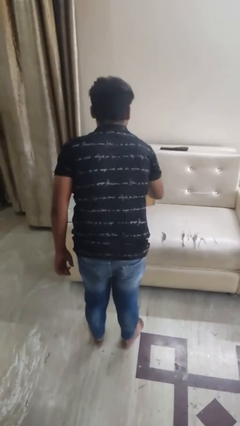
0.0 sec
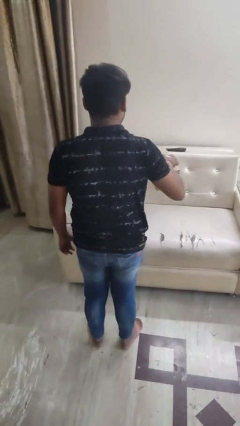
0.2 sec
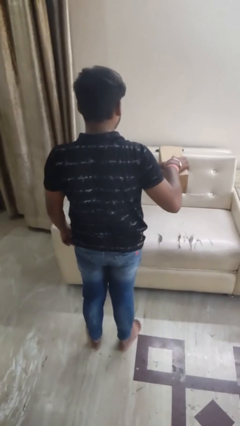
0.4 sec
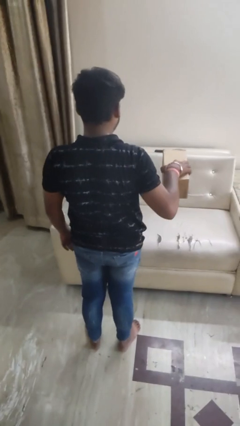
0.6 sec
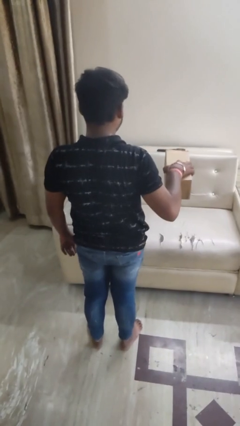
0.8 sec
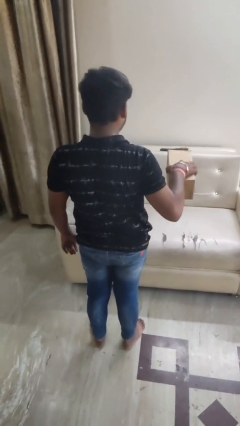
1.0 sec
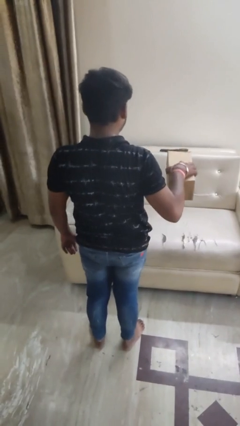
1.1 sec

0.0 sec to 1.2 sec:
person picks up object from bed

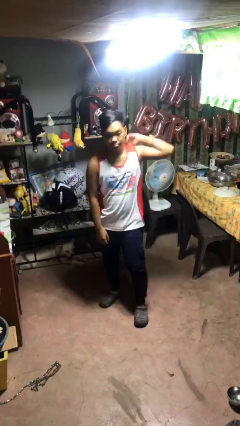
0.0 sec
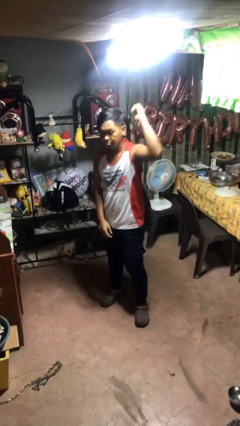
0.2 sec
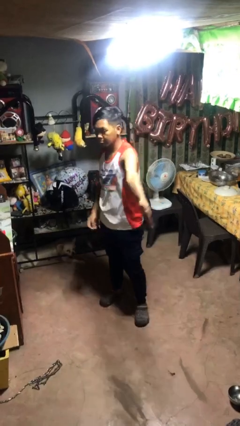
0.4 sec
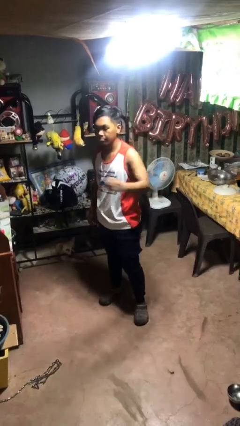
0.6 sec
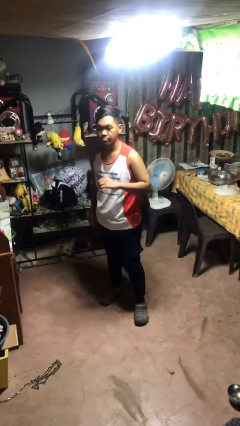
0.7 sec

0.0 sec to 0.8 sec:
person karate chop

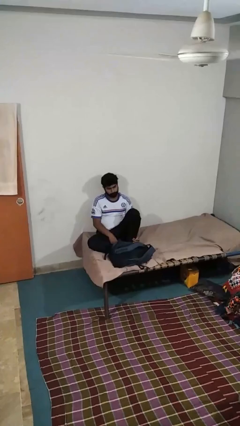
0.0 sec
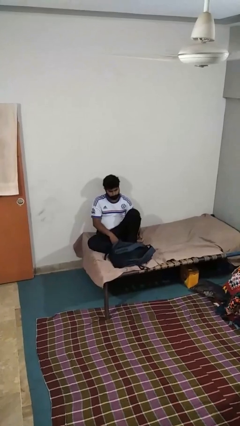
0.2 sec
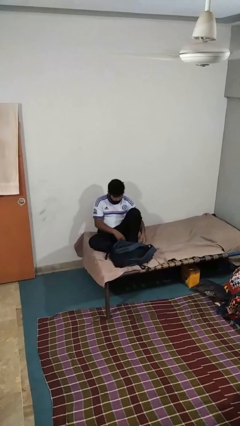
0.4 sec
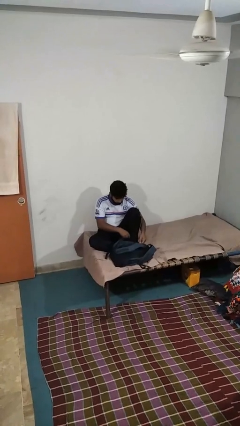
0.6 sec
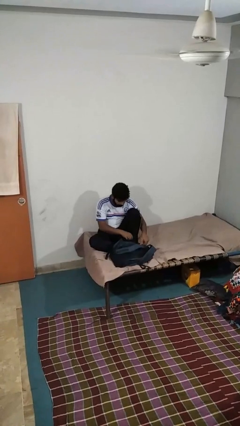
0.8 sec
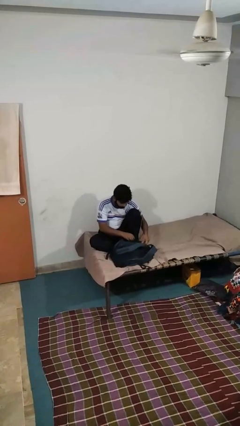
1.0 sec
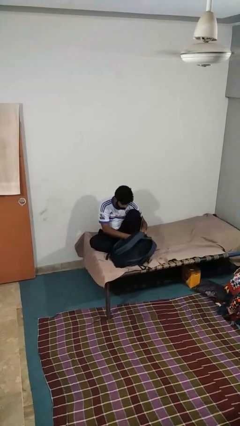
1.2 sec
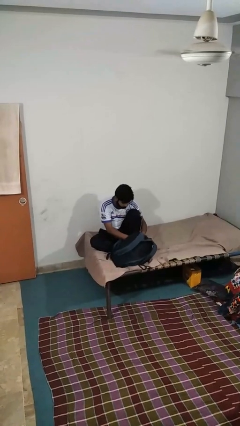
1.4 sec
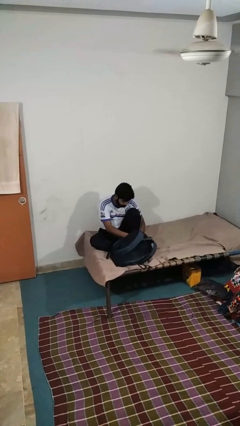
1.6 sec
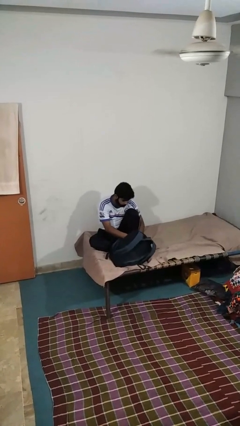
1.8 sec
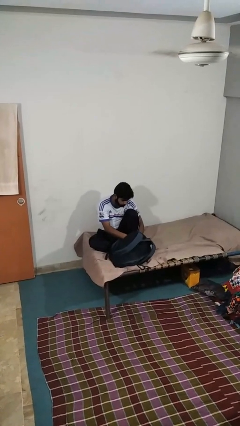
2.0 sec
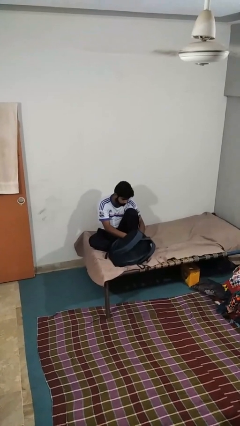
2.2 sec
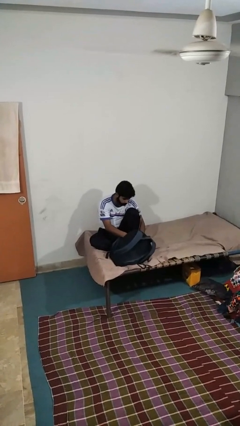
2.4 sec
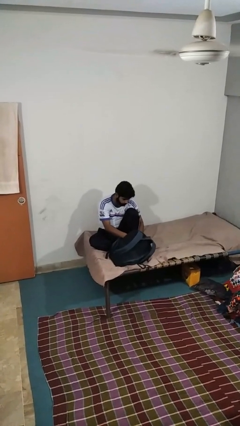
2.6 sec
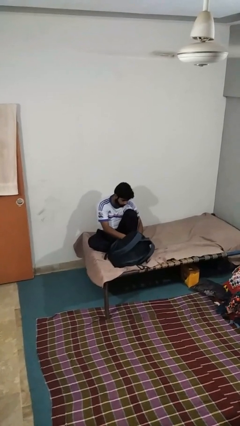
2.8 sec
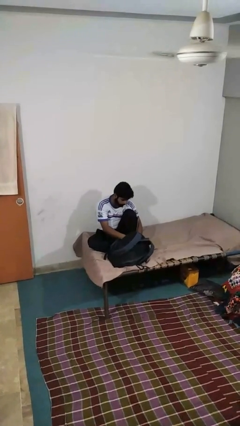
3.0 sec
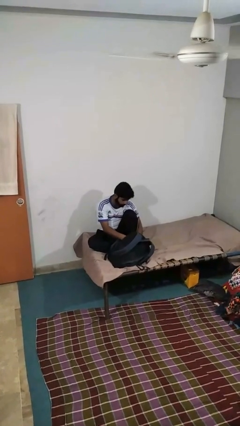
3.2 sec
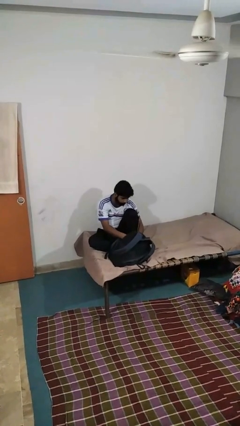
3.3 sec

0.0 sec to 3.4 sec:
person searches in backpack

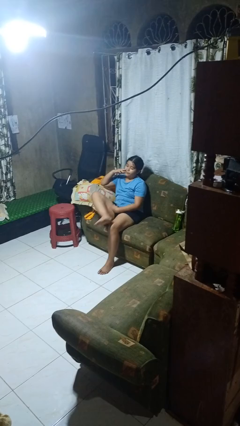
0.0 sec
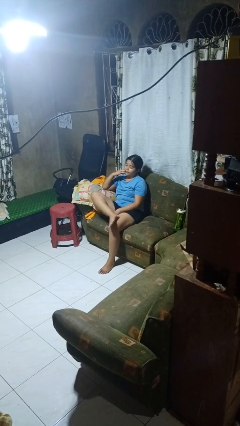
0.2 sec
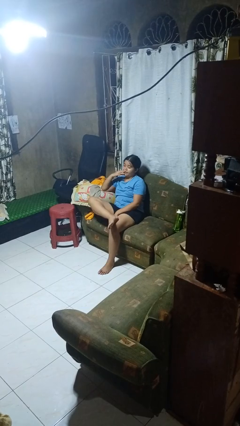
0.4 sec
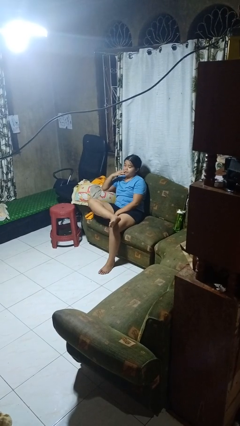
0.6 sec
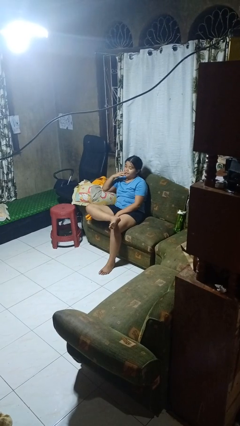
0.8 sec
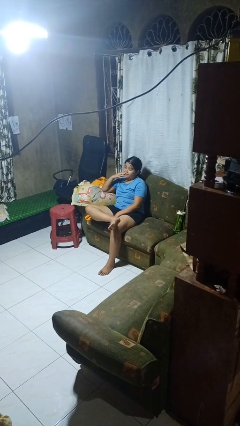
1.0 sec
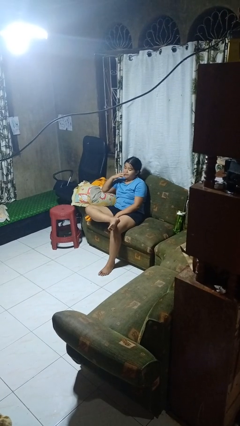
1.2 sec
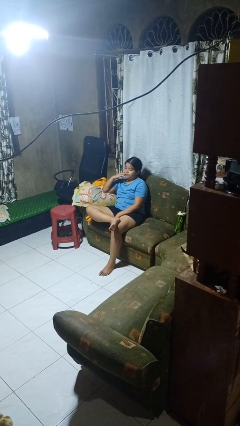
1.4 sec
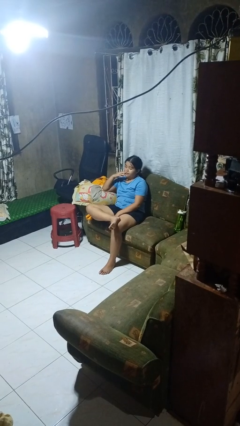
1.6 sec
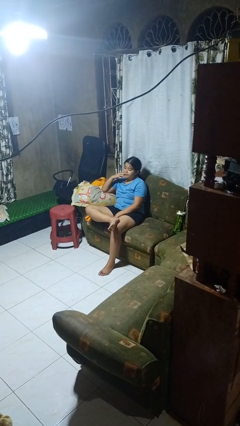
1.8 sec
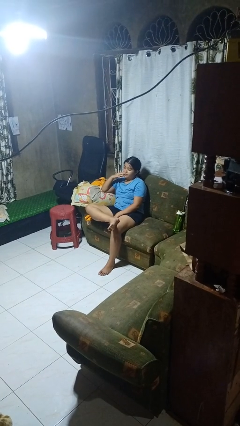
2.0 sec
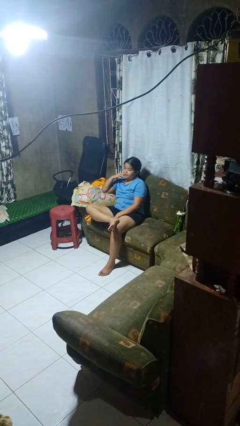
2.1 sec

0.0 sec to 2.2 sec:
person crosses legs

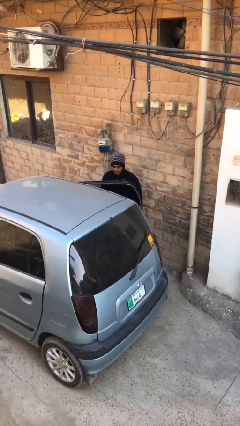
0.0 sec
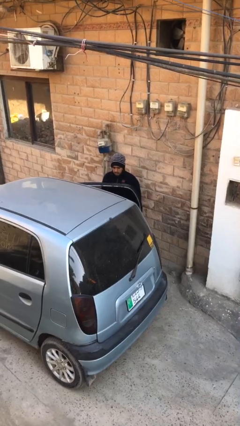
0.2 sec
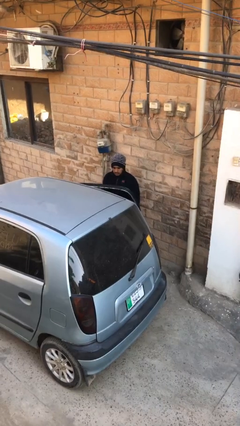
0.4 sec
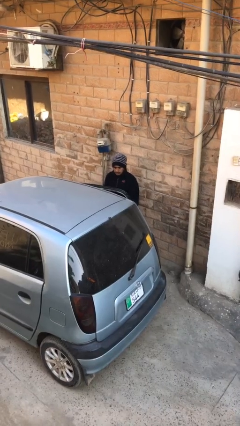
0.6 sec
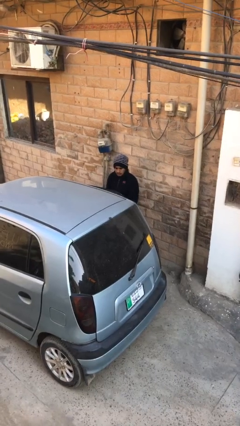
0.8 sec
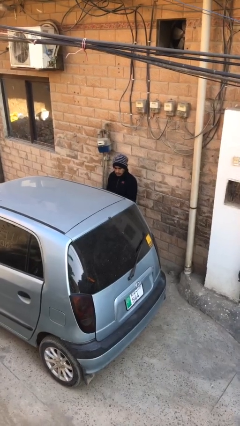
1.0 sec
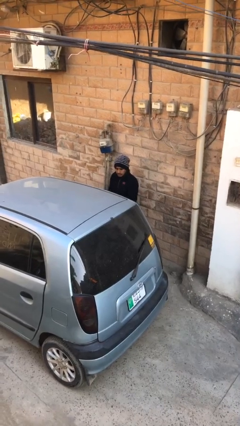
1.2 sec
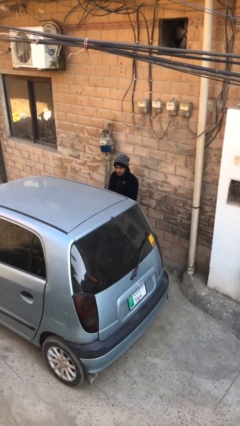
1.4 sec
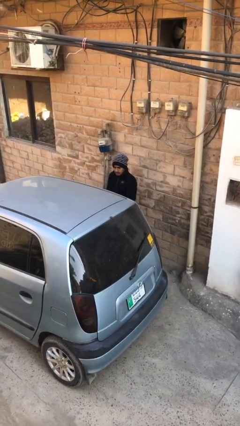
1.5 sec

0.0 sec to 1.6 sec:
person closes car door

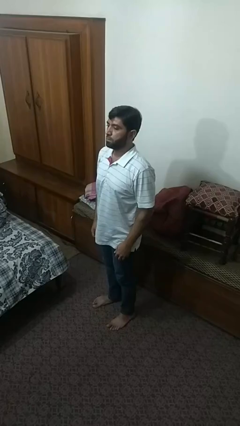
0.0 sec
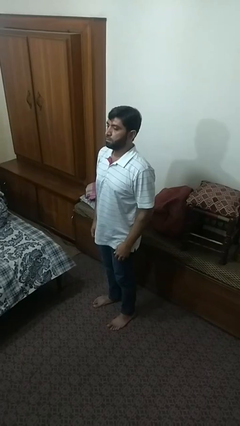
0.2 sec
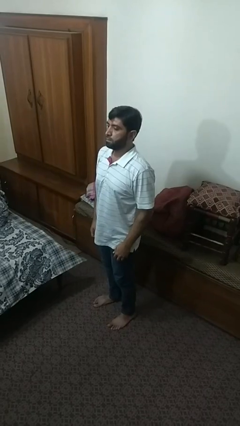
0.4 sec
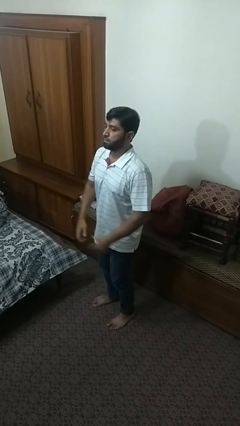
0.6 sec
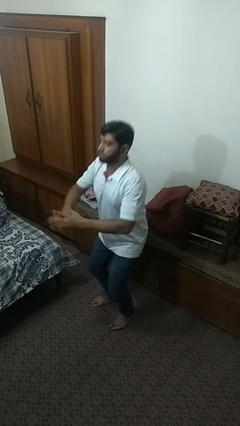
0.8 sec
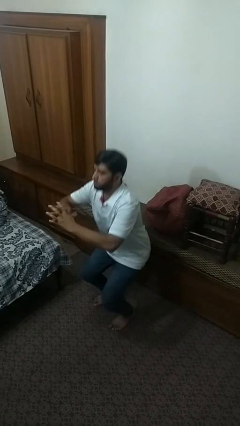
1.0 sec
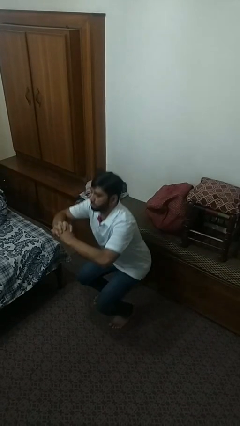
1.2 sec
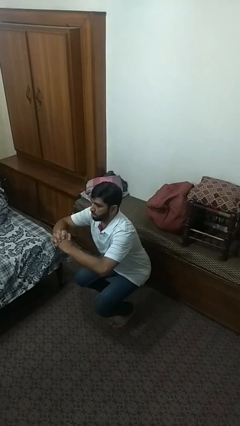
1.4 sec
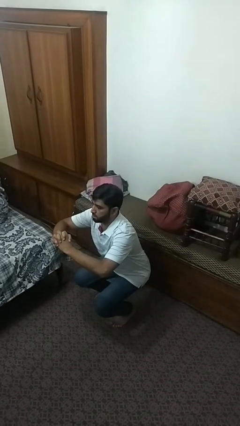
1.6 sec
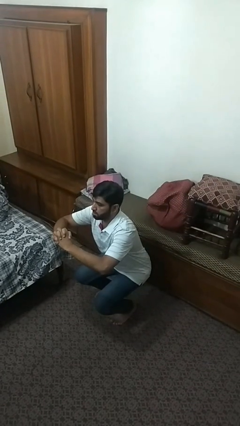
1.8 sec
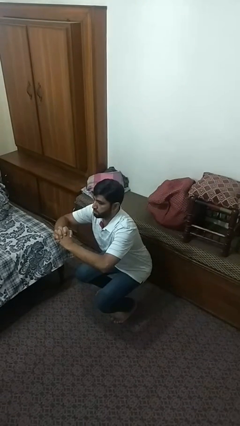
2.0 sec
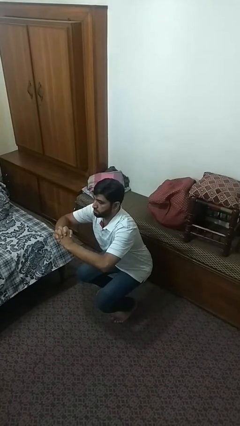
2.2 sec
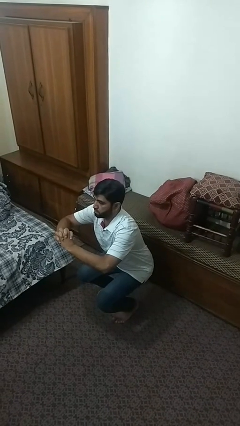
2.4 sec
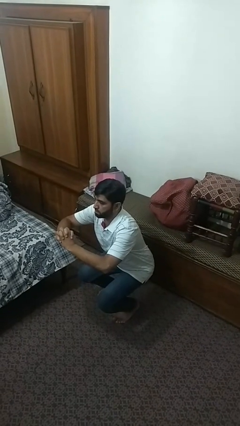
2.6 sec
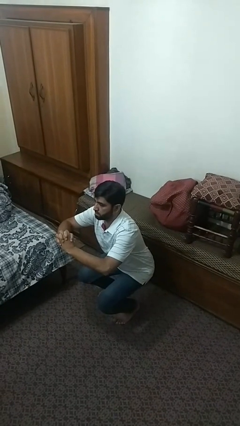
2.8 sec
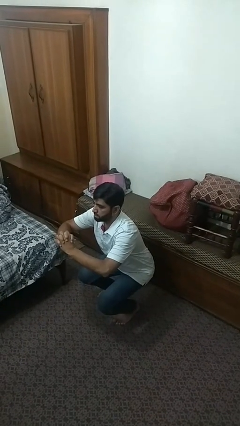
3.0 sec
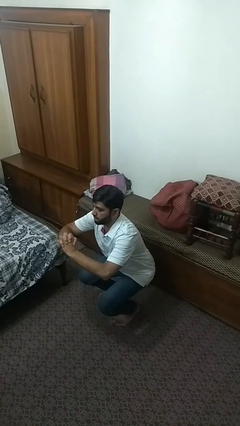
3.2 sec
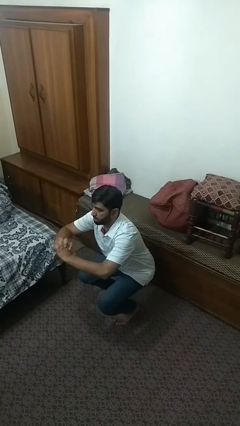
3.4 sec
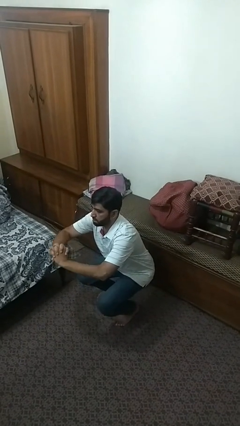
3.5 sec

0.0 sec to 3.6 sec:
person squats

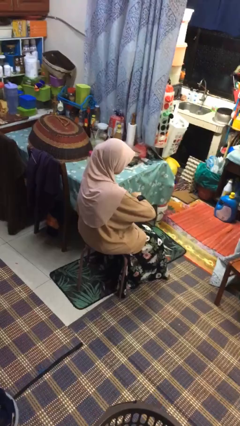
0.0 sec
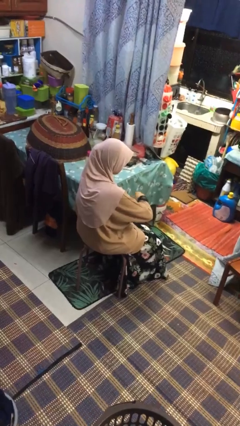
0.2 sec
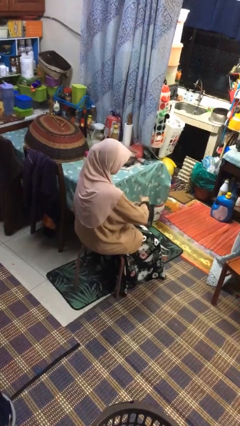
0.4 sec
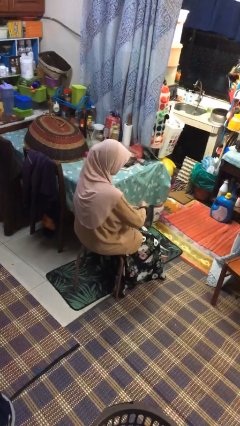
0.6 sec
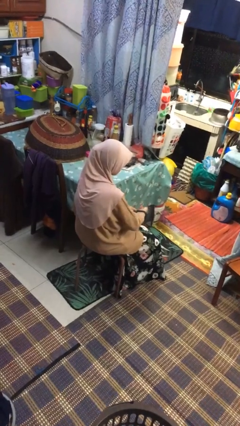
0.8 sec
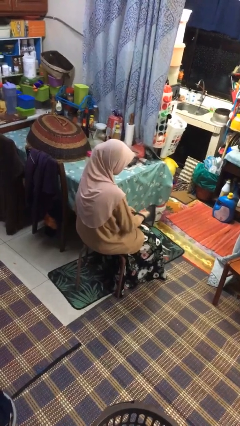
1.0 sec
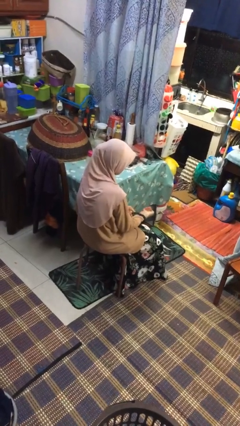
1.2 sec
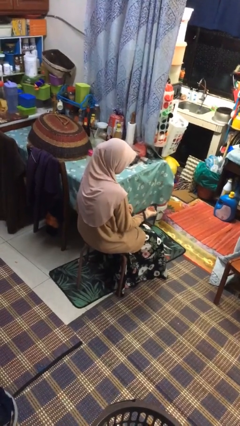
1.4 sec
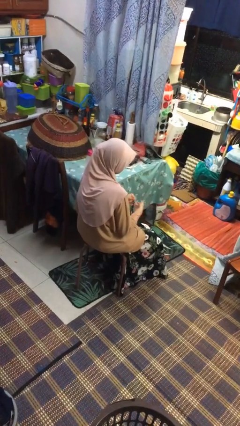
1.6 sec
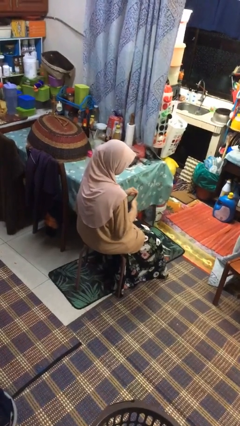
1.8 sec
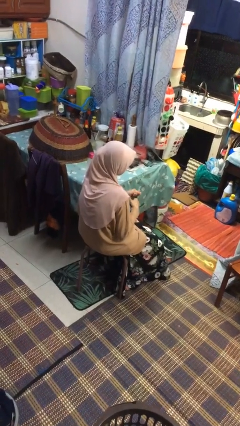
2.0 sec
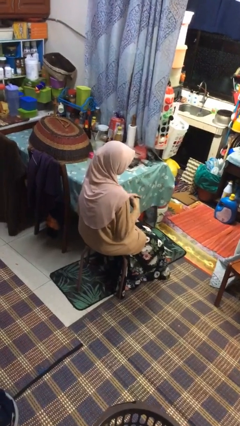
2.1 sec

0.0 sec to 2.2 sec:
person takes off wristwatch

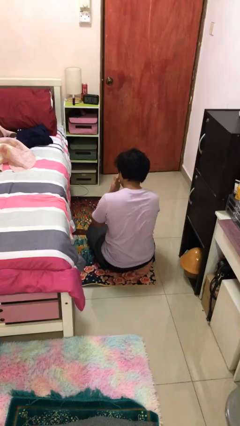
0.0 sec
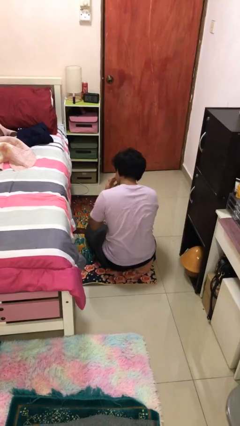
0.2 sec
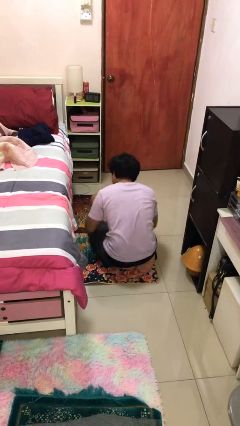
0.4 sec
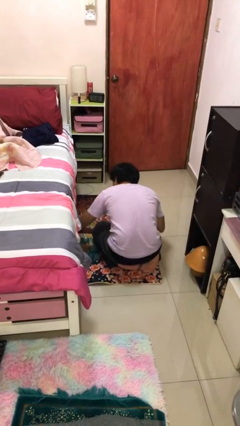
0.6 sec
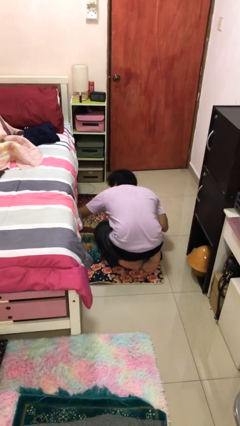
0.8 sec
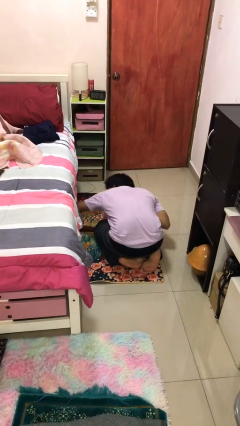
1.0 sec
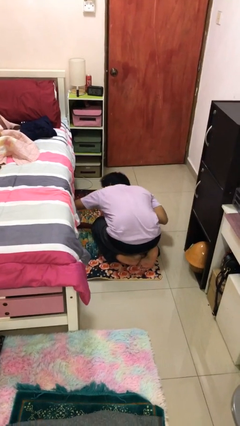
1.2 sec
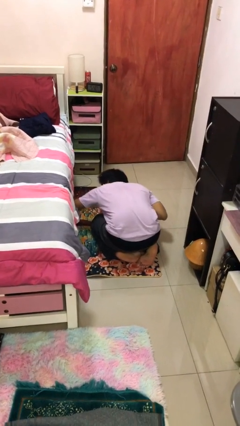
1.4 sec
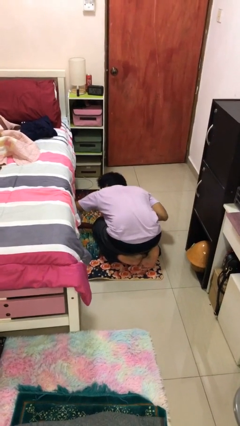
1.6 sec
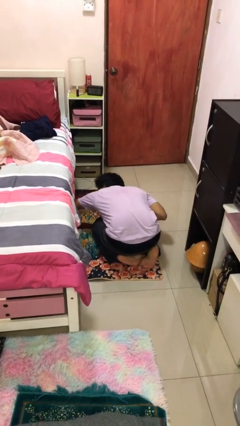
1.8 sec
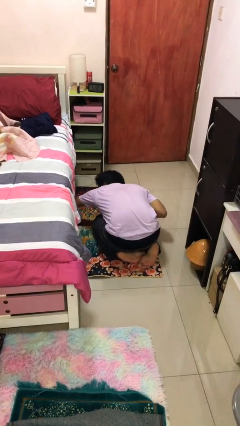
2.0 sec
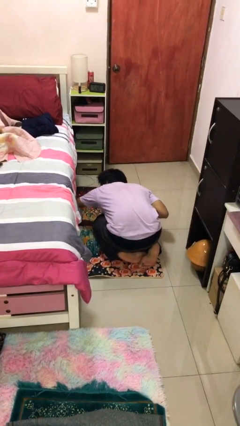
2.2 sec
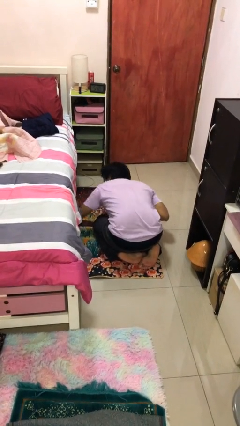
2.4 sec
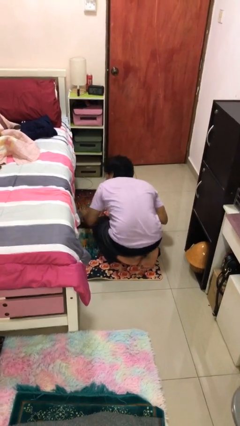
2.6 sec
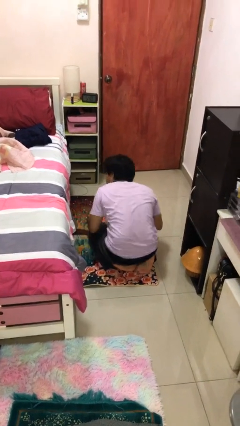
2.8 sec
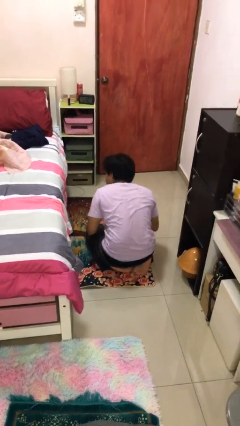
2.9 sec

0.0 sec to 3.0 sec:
person searches under bed
